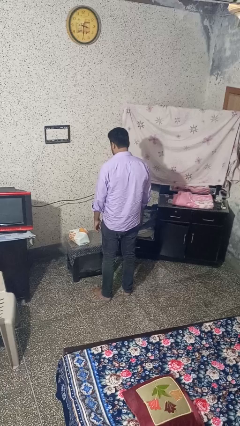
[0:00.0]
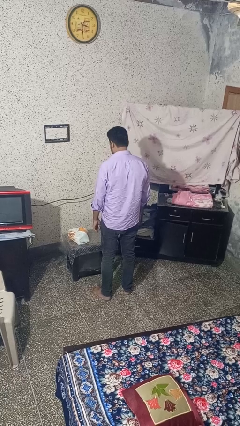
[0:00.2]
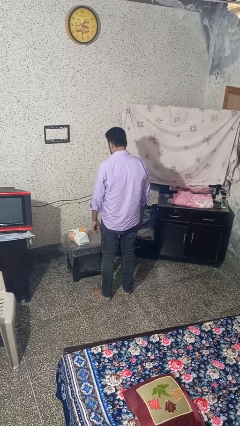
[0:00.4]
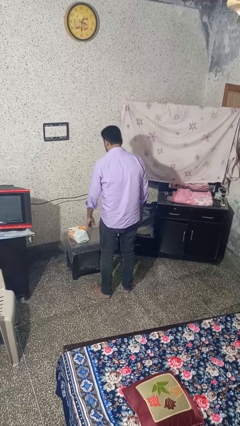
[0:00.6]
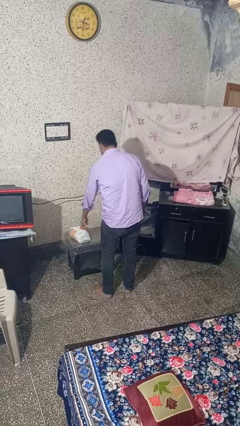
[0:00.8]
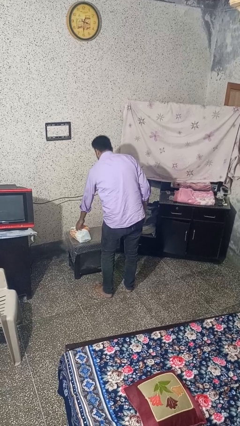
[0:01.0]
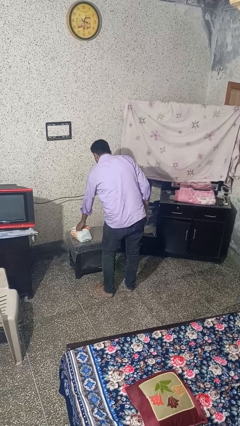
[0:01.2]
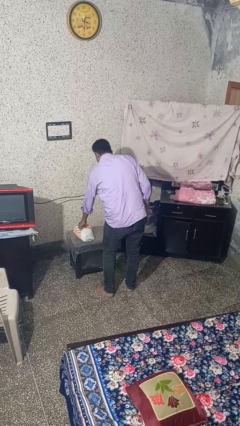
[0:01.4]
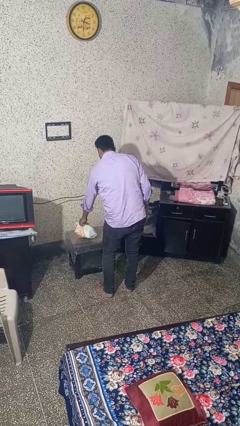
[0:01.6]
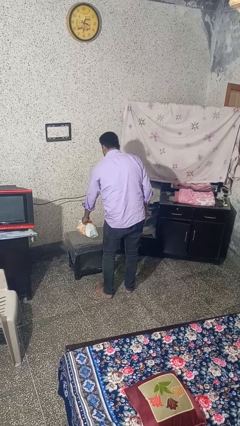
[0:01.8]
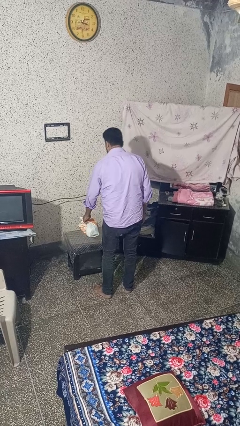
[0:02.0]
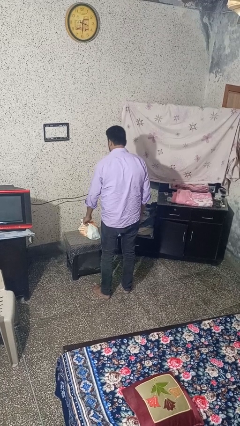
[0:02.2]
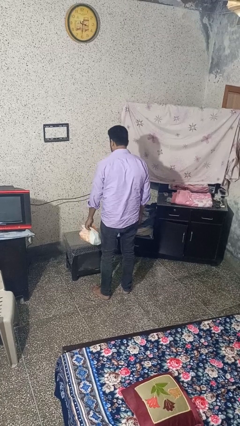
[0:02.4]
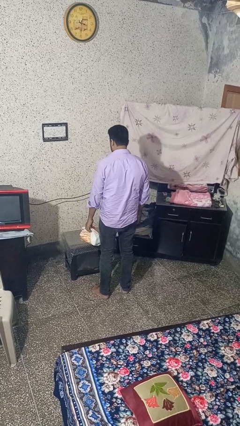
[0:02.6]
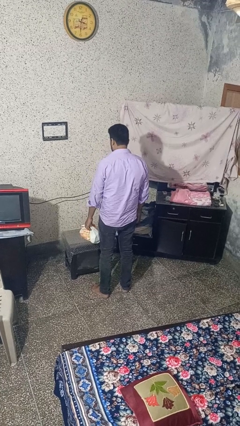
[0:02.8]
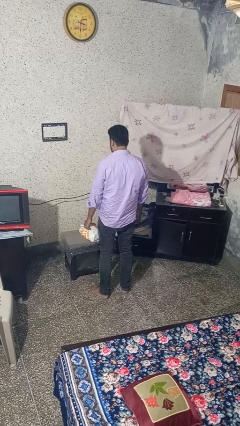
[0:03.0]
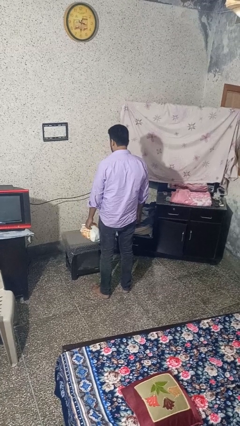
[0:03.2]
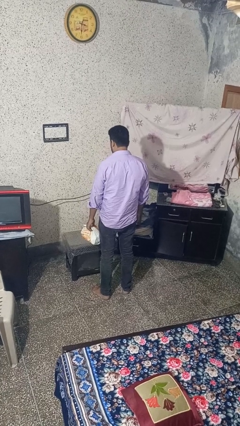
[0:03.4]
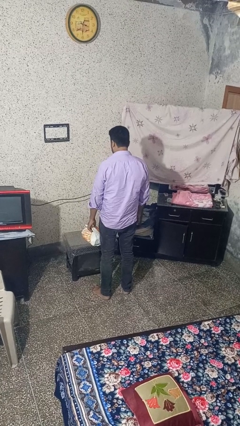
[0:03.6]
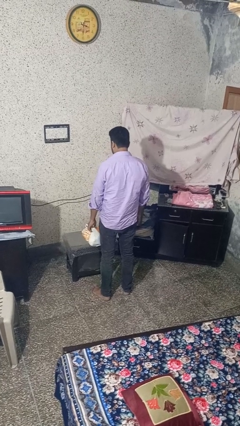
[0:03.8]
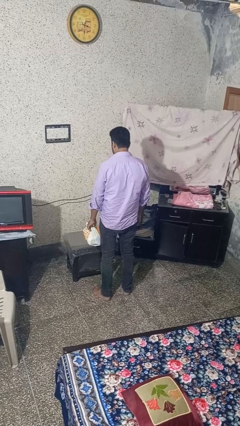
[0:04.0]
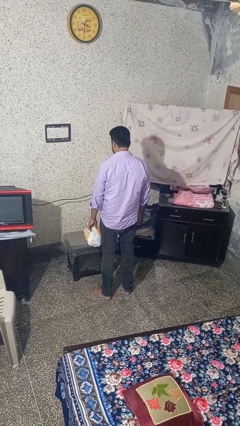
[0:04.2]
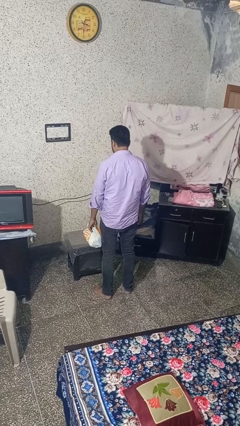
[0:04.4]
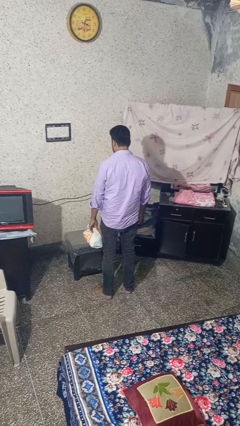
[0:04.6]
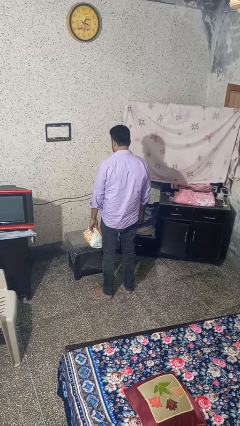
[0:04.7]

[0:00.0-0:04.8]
person picks up object from table

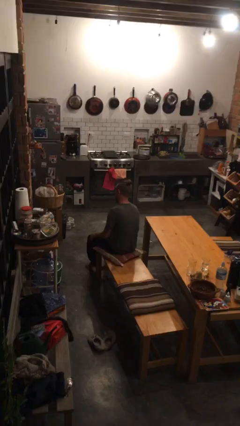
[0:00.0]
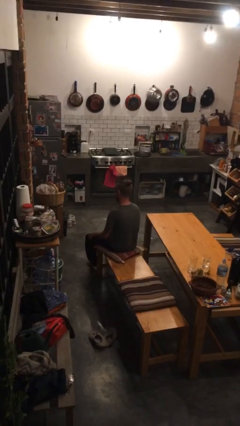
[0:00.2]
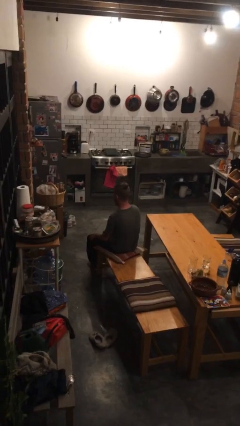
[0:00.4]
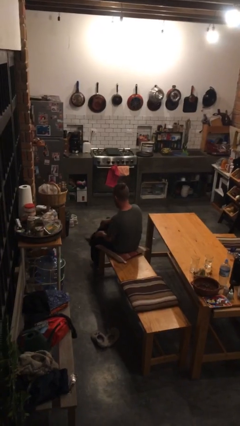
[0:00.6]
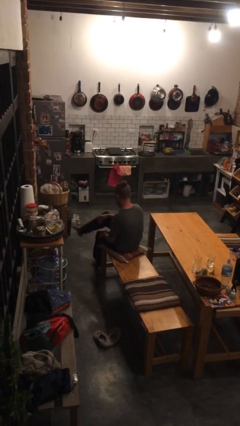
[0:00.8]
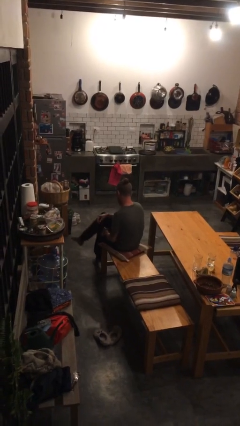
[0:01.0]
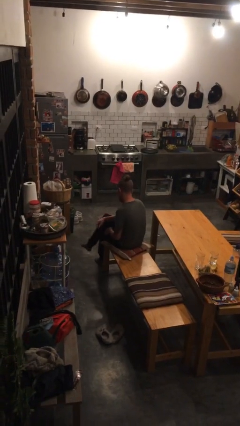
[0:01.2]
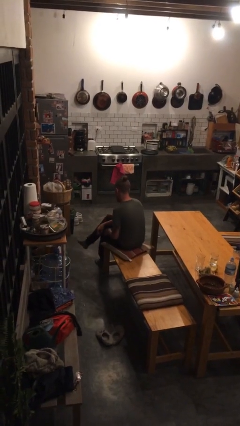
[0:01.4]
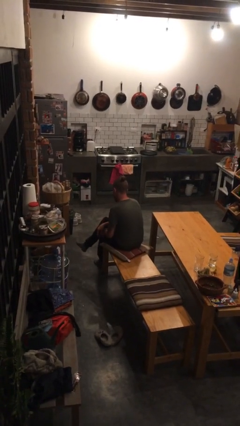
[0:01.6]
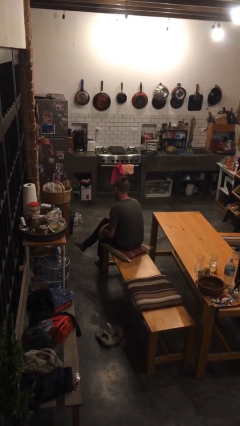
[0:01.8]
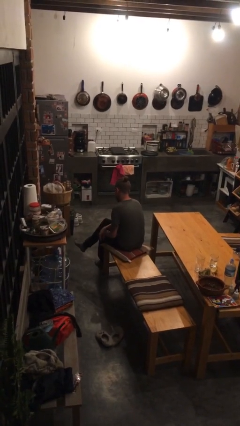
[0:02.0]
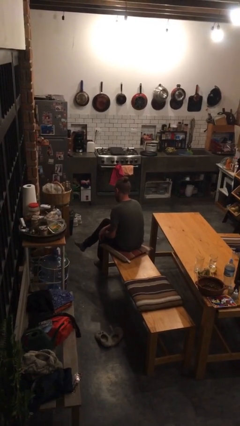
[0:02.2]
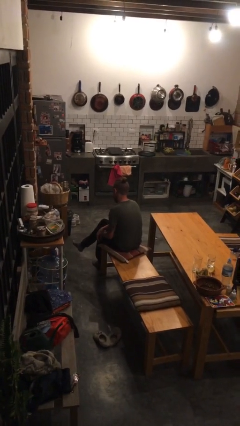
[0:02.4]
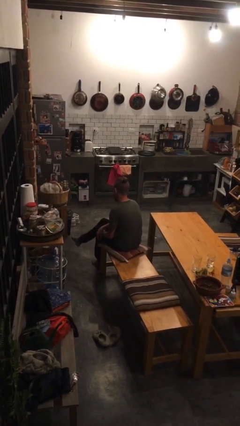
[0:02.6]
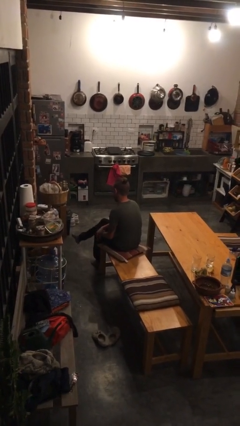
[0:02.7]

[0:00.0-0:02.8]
person crosses legs

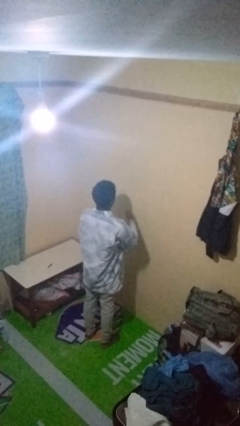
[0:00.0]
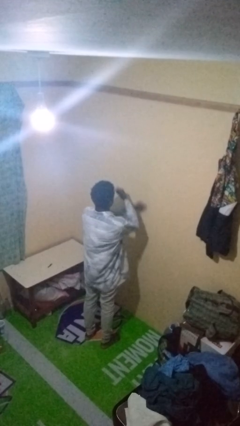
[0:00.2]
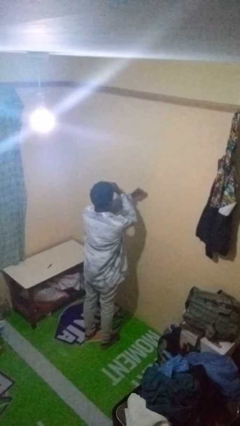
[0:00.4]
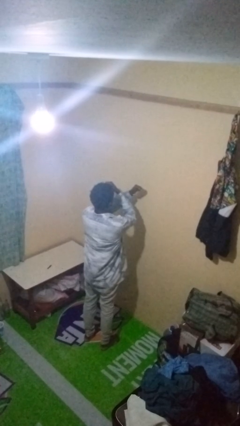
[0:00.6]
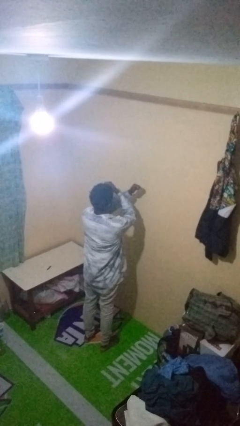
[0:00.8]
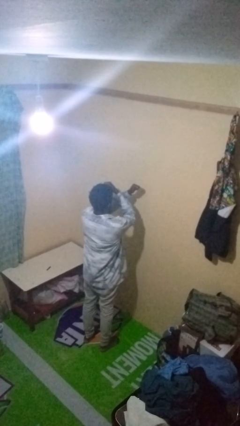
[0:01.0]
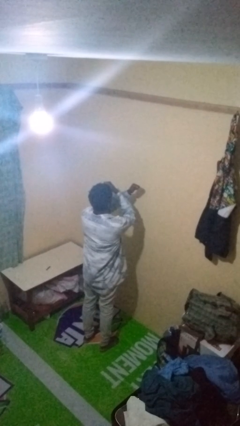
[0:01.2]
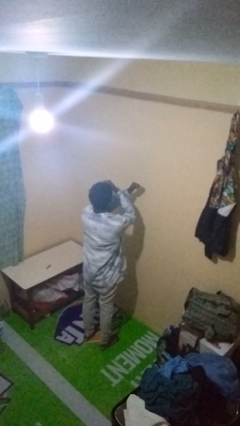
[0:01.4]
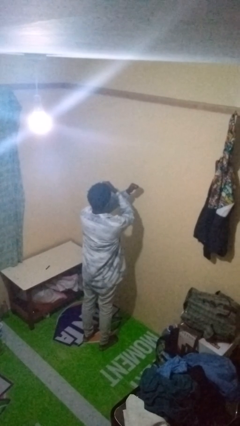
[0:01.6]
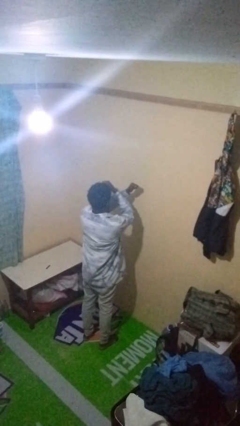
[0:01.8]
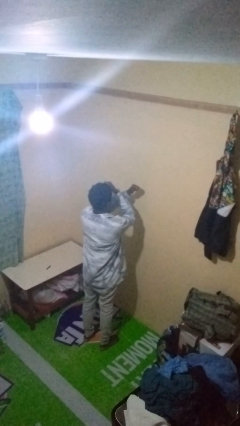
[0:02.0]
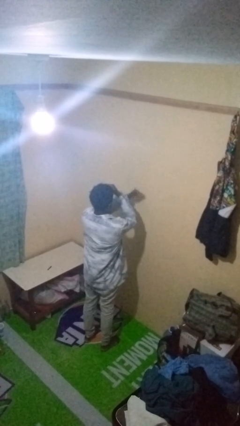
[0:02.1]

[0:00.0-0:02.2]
person gestures arms x

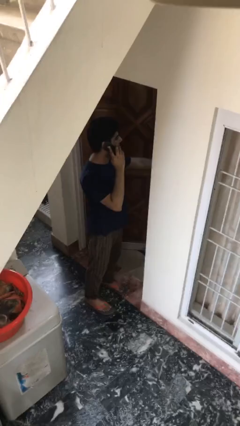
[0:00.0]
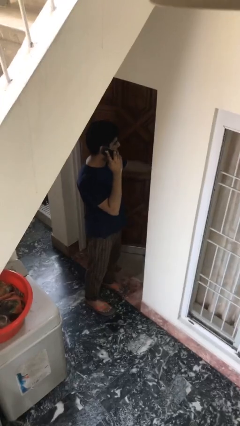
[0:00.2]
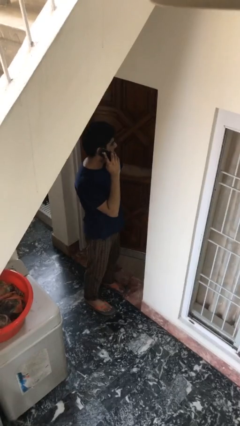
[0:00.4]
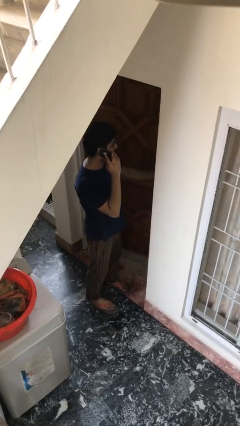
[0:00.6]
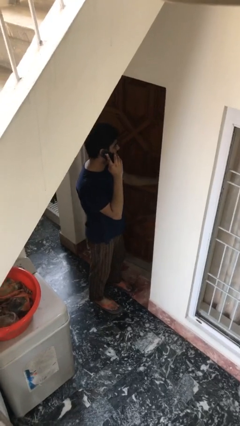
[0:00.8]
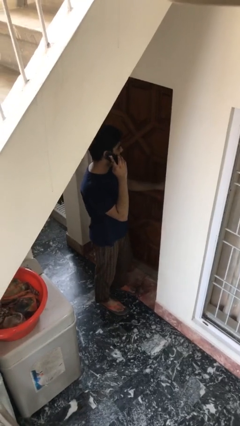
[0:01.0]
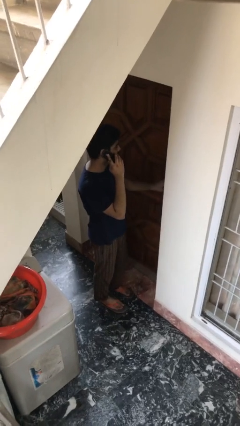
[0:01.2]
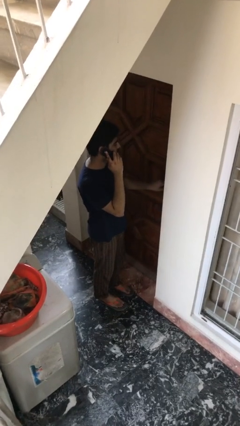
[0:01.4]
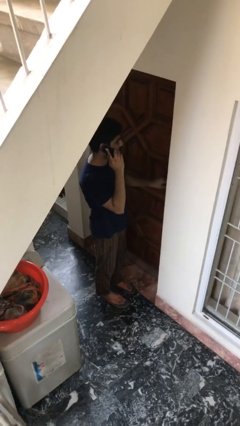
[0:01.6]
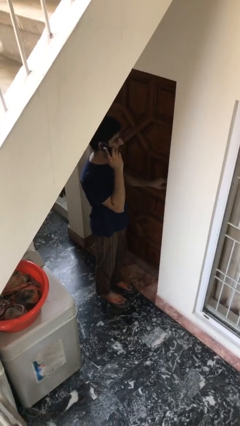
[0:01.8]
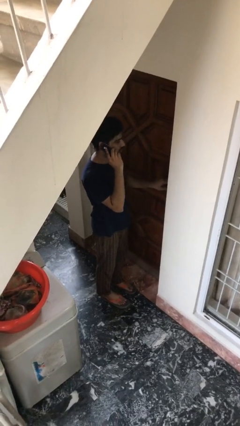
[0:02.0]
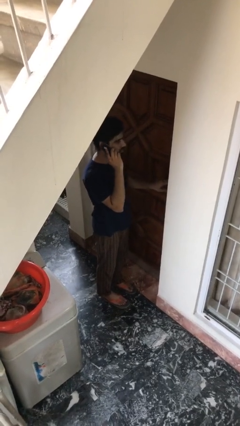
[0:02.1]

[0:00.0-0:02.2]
person closes facility door

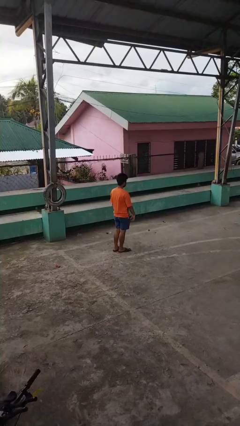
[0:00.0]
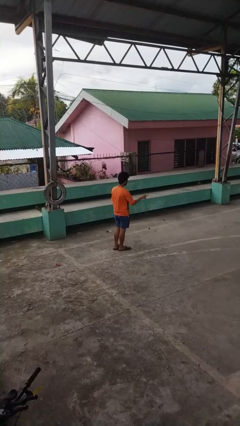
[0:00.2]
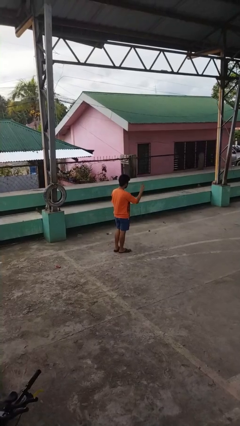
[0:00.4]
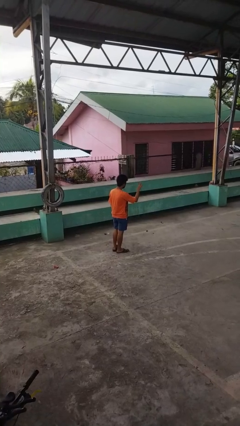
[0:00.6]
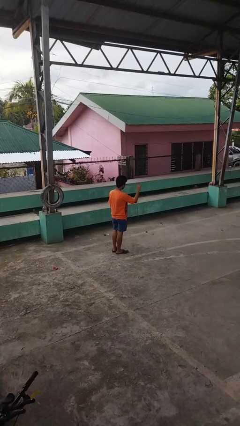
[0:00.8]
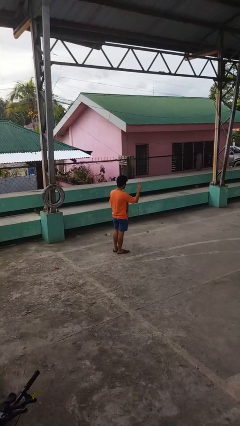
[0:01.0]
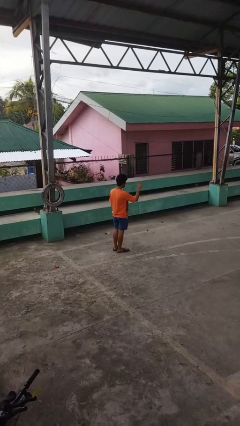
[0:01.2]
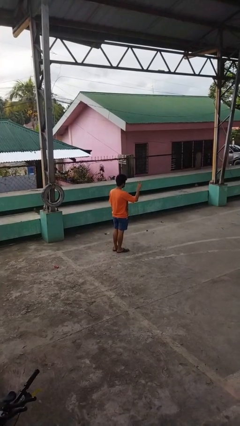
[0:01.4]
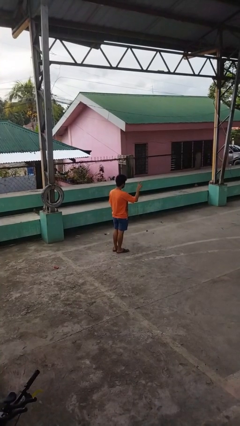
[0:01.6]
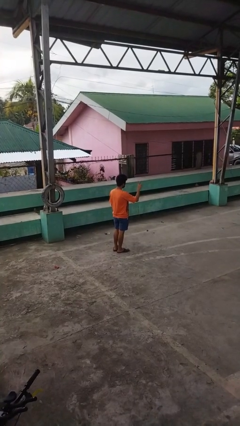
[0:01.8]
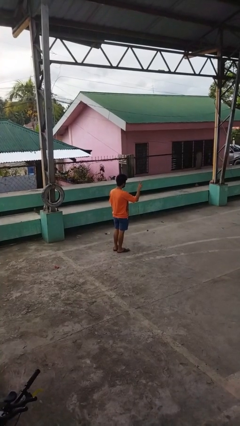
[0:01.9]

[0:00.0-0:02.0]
person gestures peace

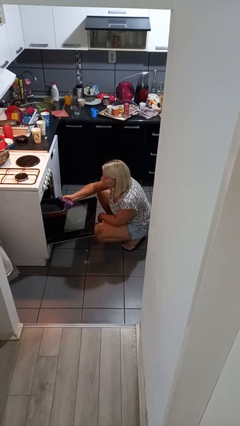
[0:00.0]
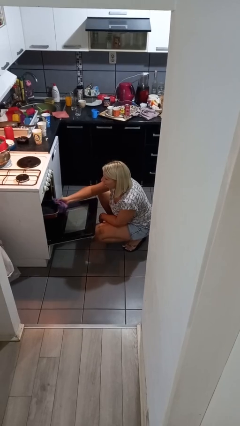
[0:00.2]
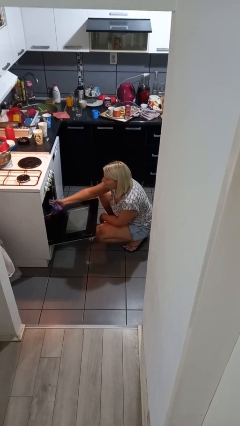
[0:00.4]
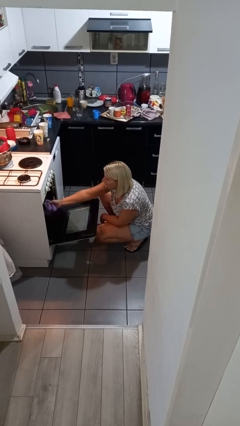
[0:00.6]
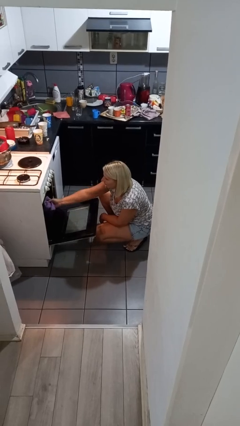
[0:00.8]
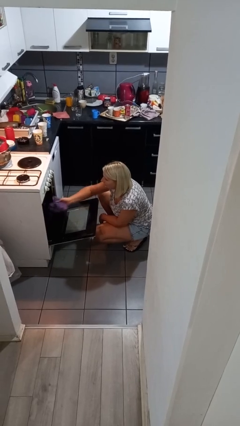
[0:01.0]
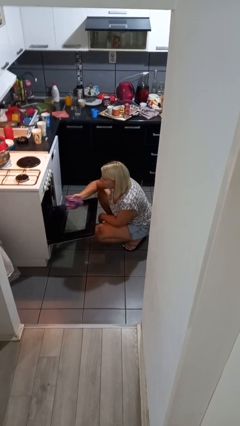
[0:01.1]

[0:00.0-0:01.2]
person puts object into oven

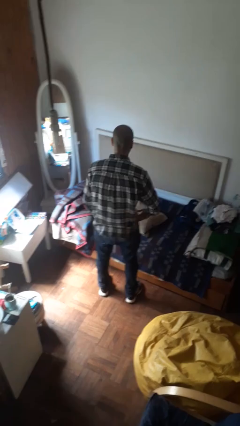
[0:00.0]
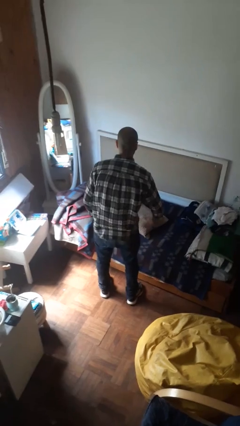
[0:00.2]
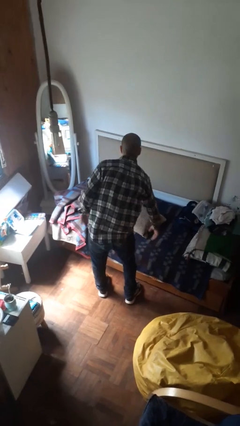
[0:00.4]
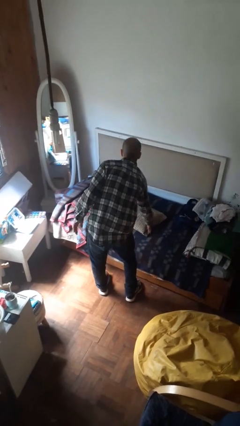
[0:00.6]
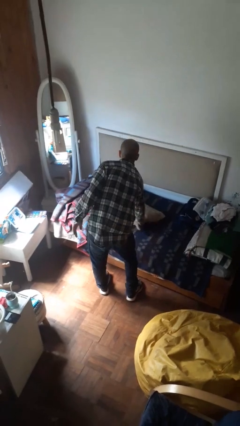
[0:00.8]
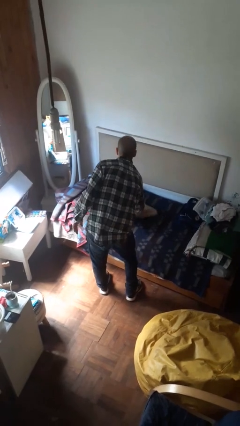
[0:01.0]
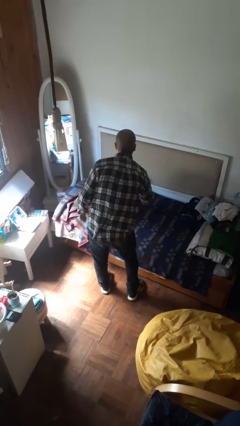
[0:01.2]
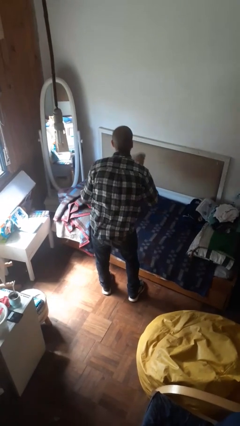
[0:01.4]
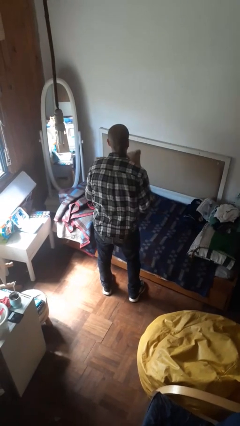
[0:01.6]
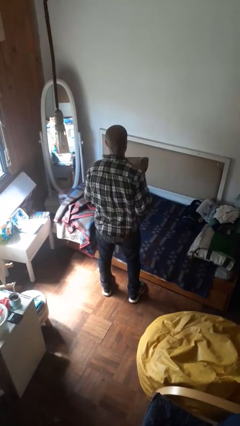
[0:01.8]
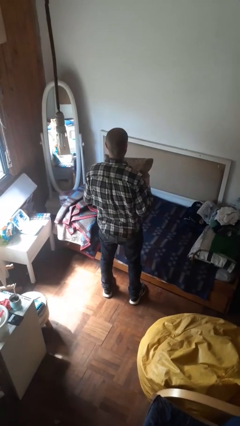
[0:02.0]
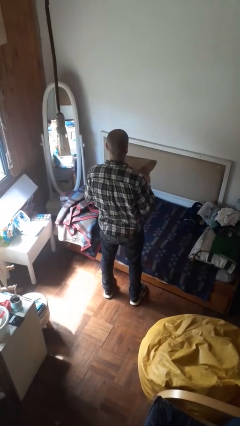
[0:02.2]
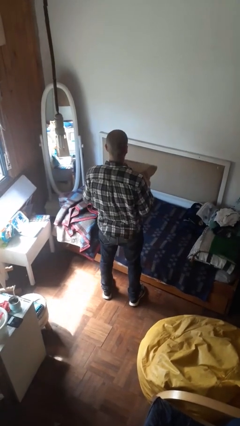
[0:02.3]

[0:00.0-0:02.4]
person picks up object from bed
